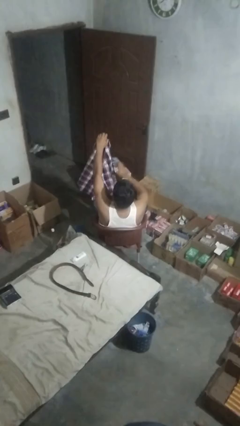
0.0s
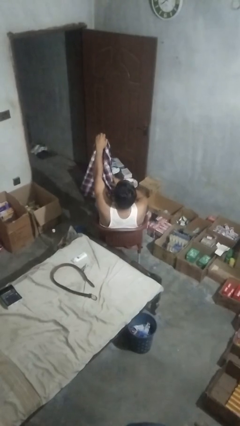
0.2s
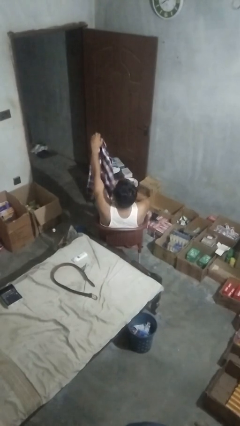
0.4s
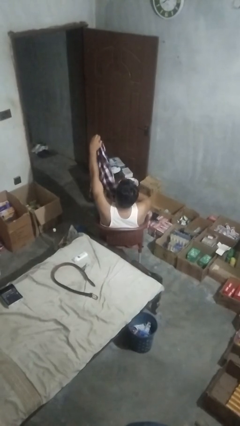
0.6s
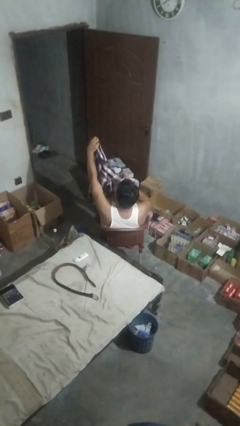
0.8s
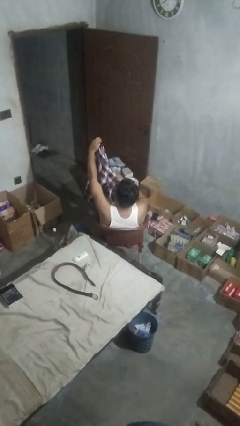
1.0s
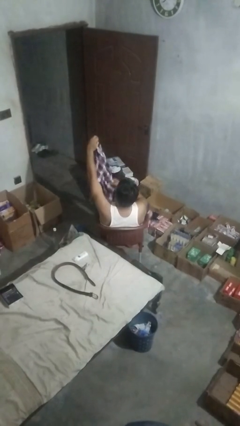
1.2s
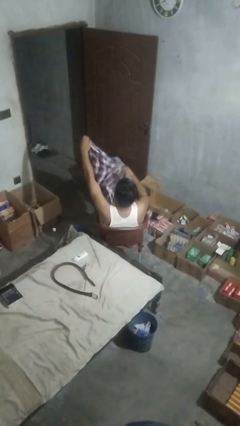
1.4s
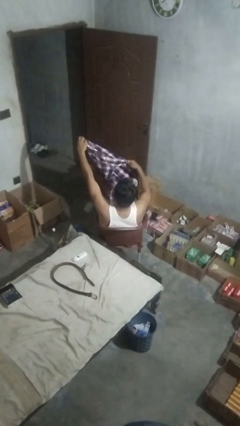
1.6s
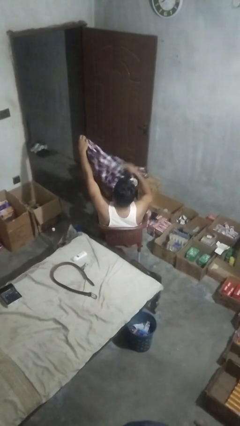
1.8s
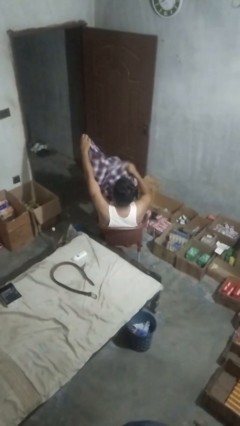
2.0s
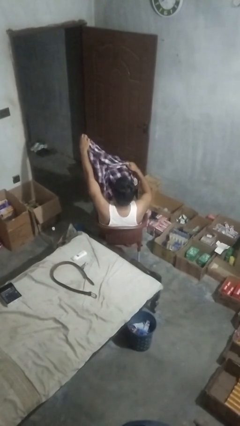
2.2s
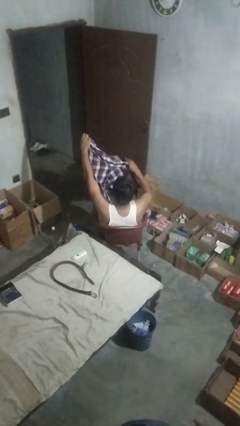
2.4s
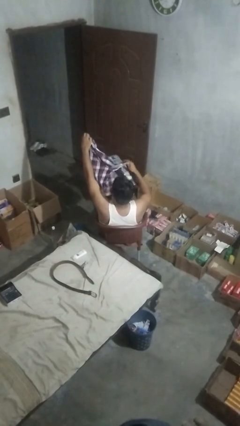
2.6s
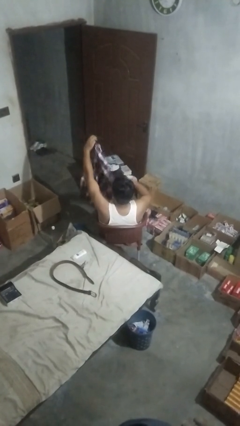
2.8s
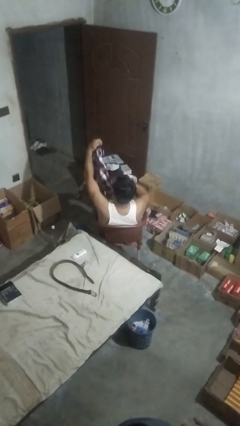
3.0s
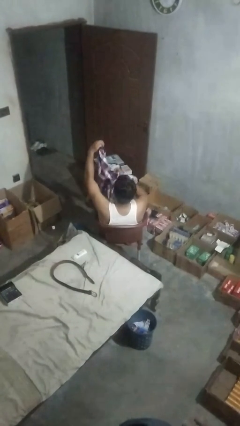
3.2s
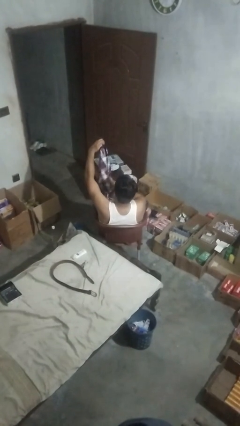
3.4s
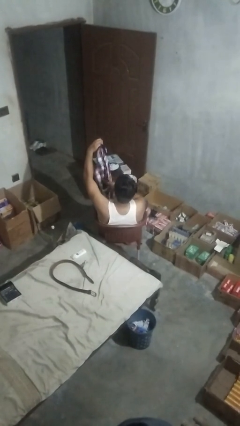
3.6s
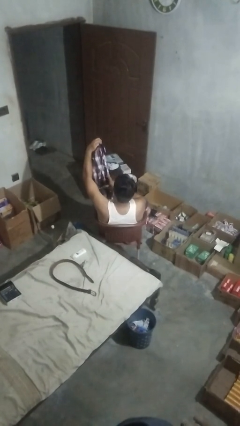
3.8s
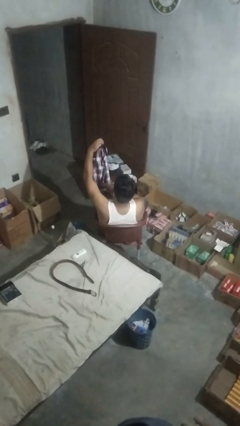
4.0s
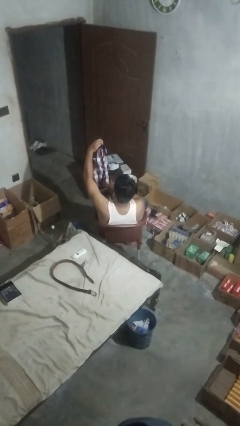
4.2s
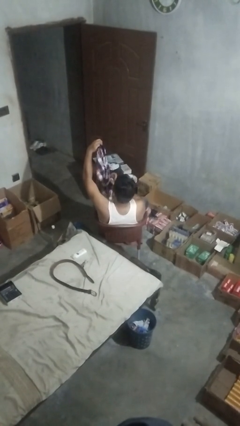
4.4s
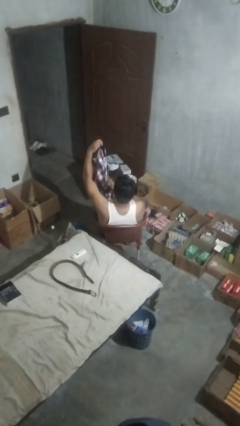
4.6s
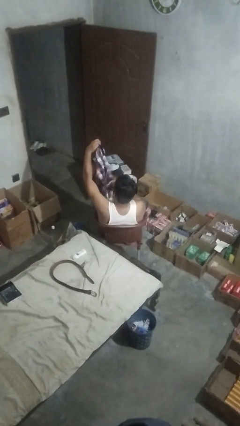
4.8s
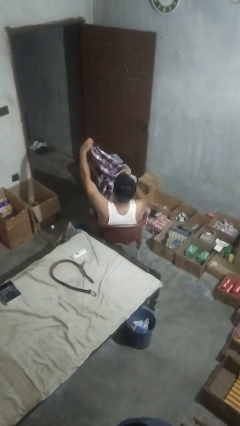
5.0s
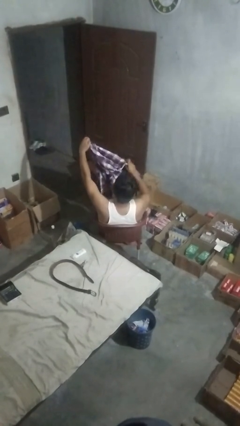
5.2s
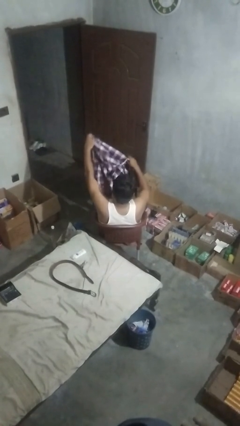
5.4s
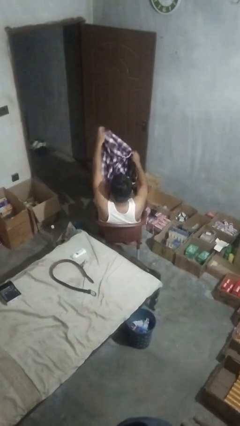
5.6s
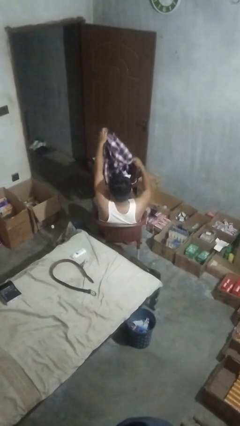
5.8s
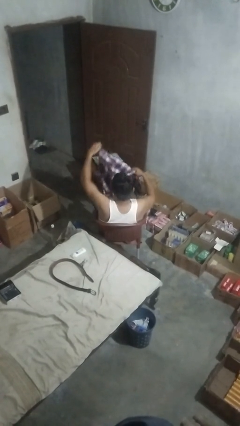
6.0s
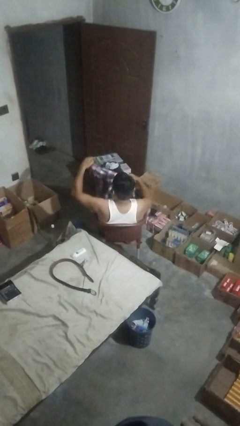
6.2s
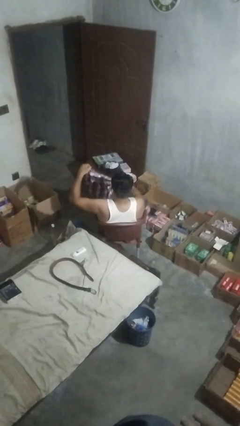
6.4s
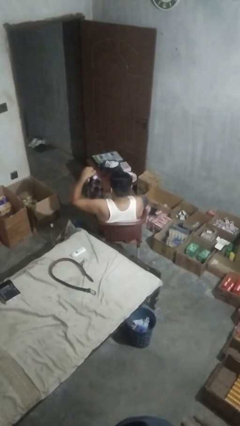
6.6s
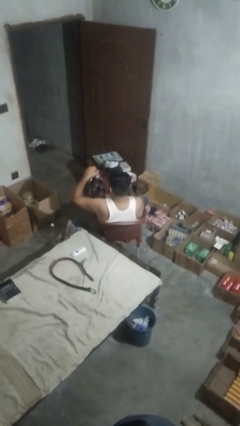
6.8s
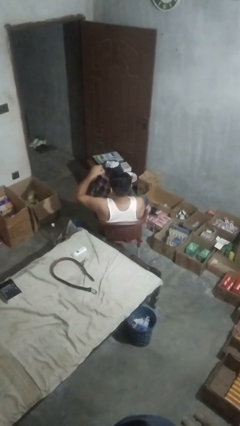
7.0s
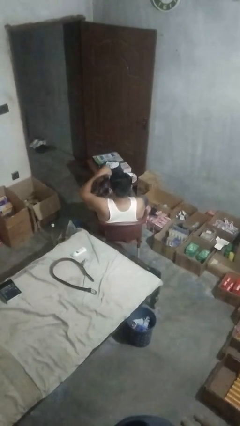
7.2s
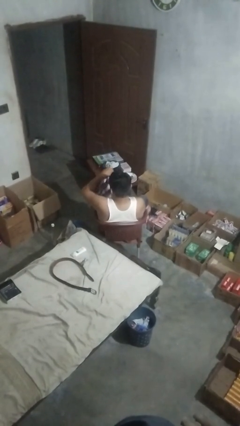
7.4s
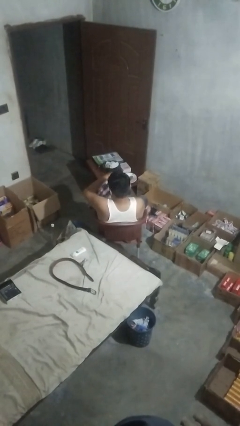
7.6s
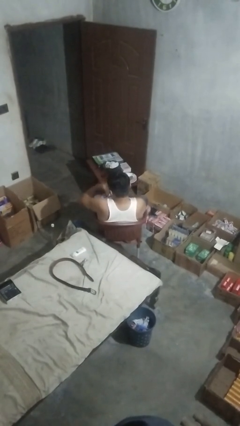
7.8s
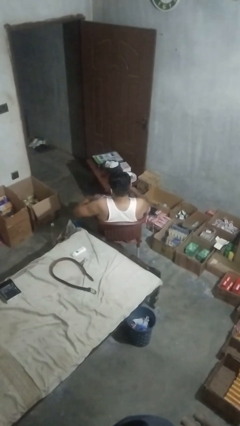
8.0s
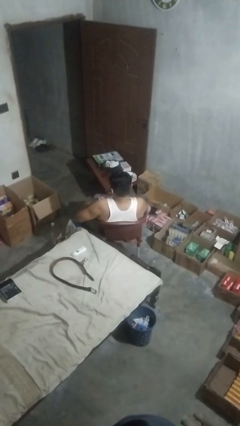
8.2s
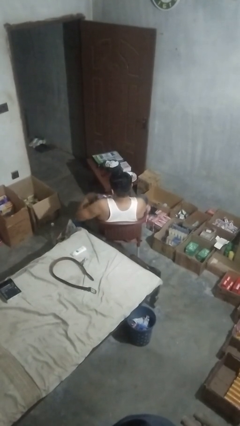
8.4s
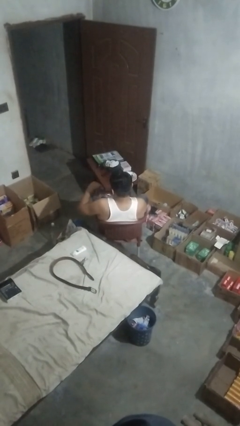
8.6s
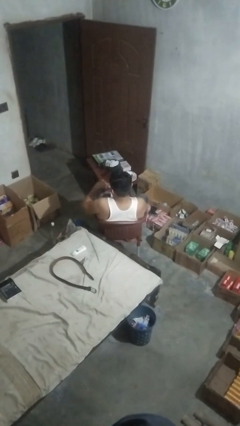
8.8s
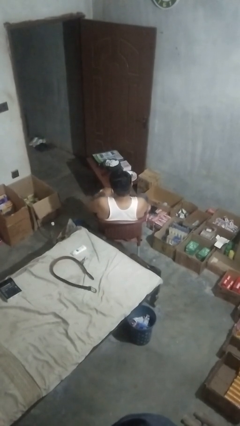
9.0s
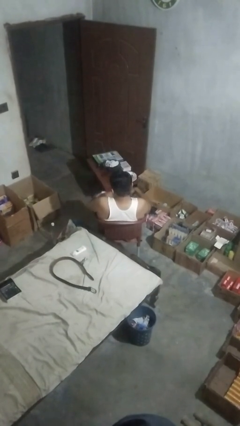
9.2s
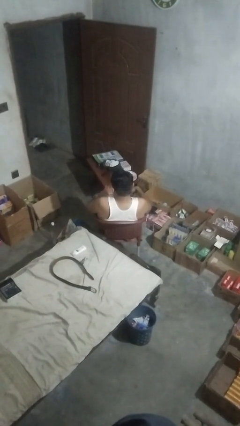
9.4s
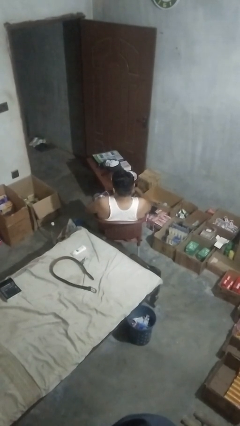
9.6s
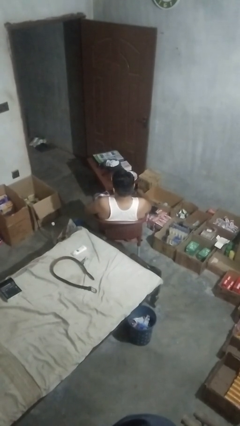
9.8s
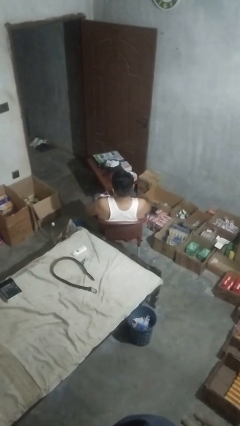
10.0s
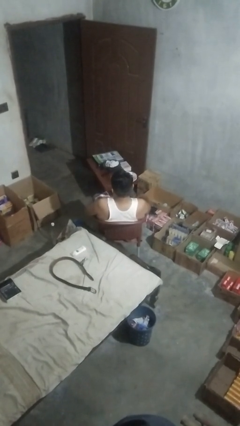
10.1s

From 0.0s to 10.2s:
person folds shirt

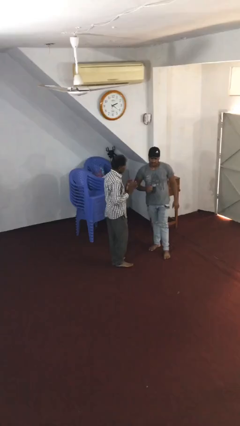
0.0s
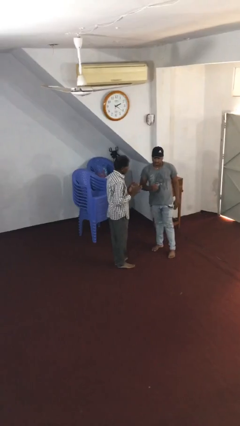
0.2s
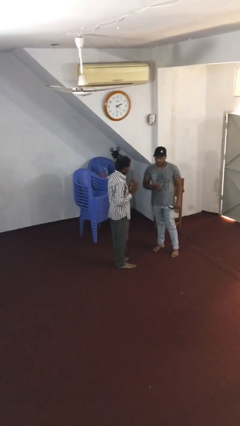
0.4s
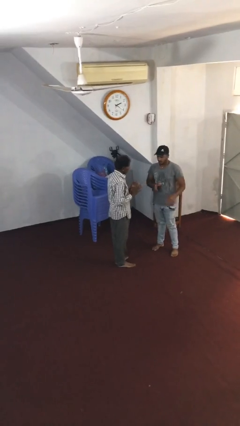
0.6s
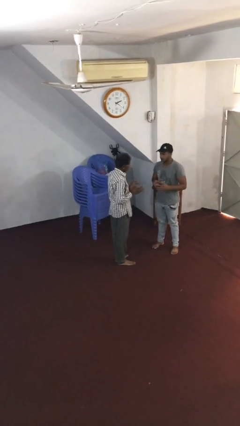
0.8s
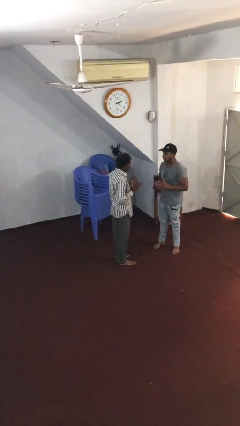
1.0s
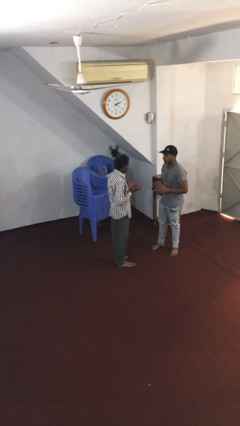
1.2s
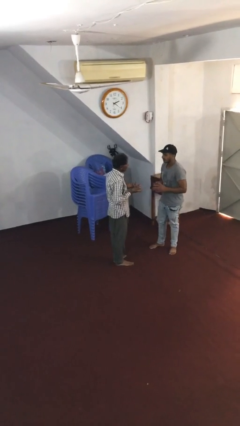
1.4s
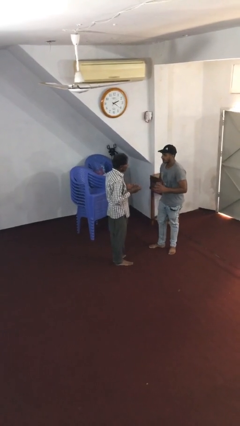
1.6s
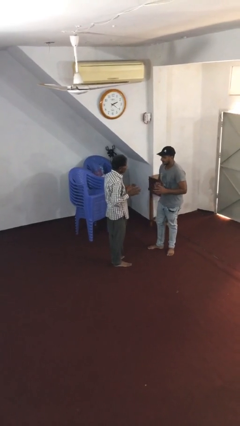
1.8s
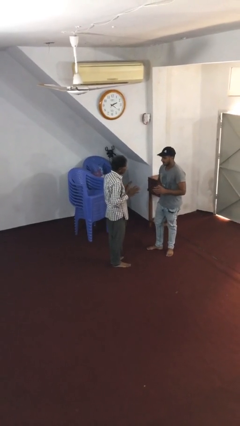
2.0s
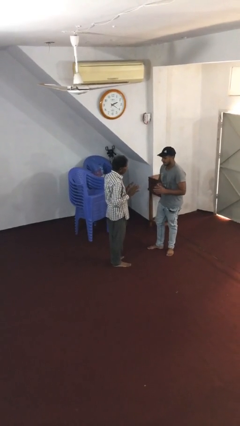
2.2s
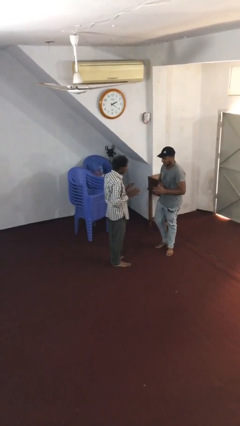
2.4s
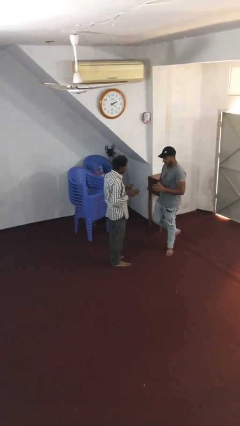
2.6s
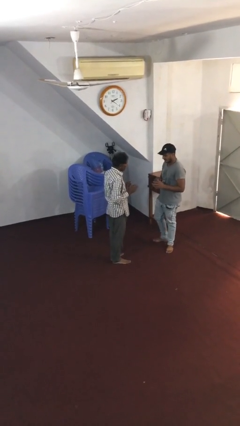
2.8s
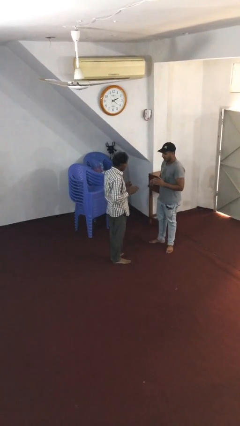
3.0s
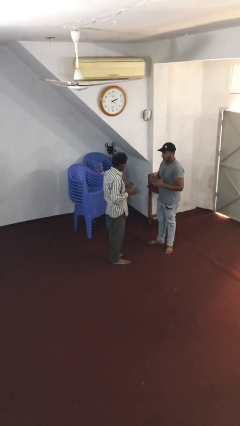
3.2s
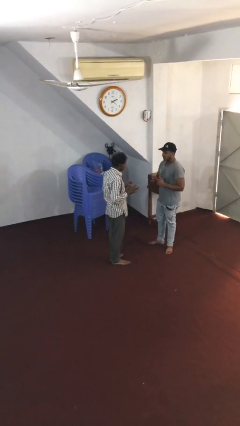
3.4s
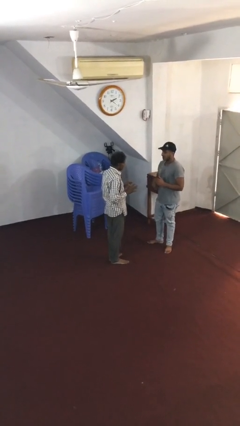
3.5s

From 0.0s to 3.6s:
person talks to person

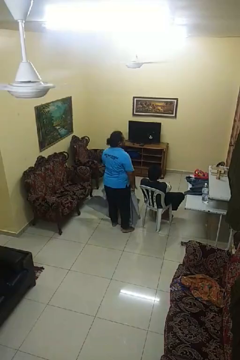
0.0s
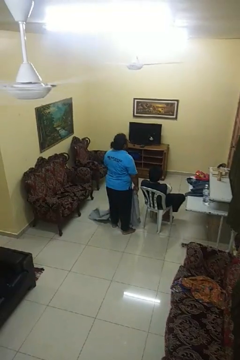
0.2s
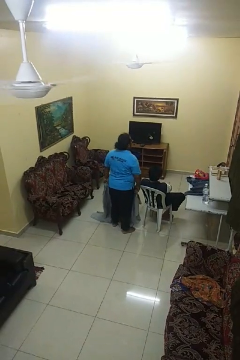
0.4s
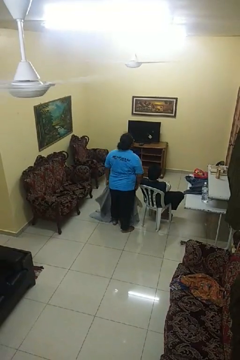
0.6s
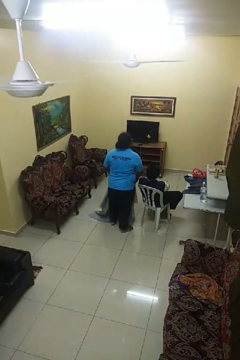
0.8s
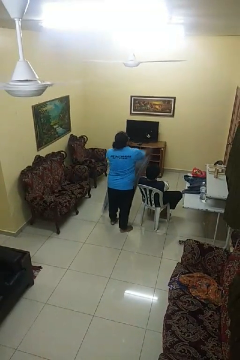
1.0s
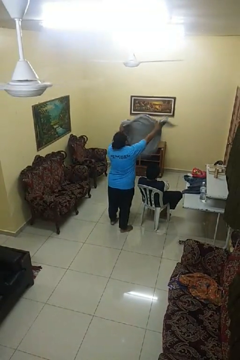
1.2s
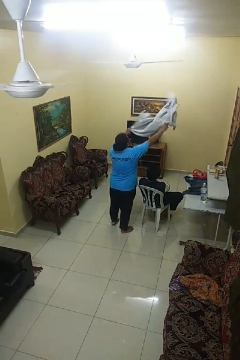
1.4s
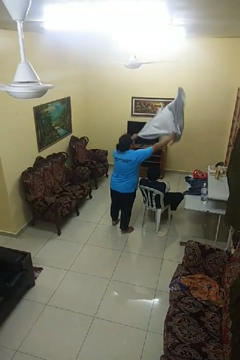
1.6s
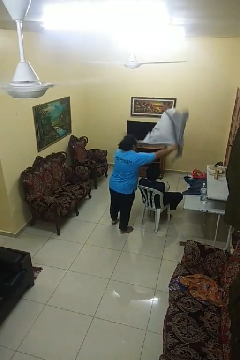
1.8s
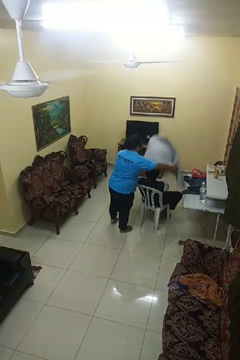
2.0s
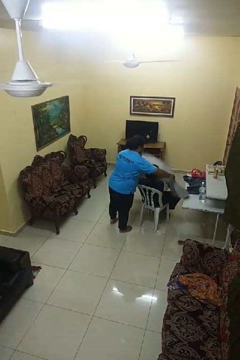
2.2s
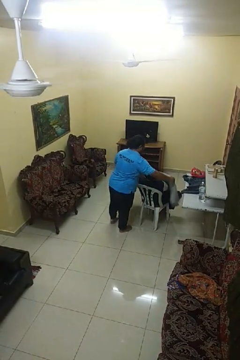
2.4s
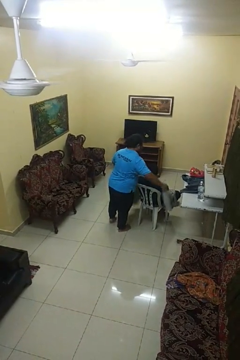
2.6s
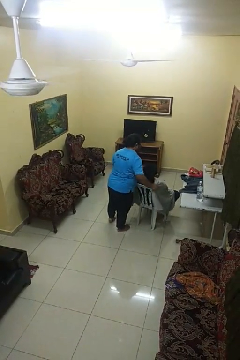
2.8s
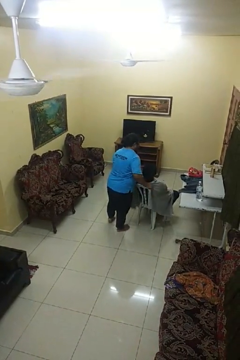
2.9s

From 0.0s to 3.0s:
person covers friend with blanket

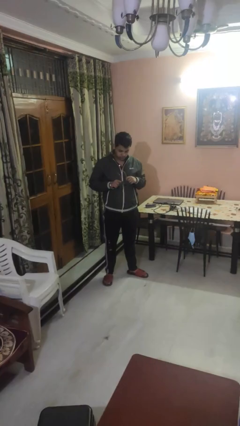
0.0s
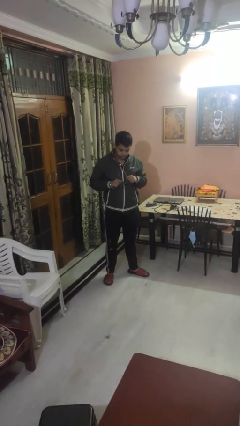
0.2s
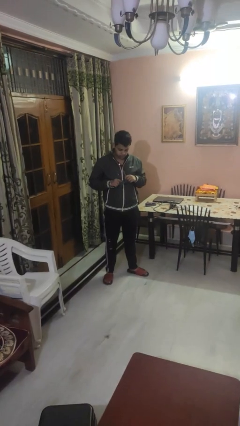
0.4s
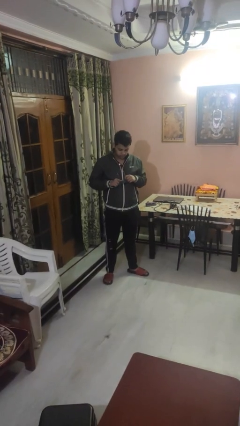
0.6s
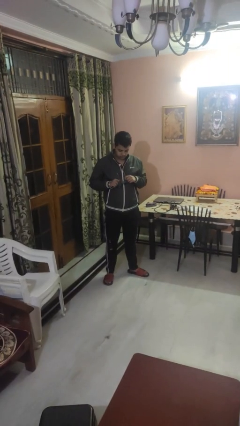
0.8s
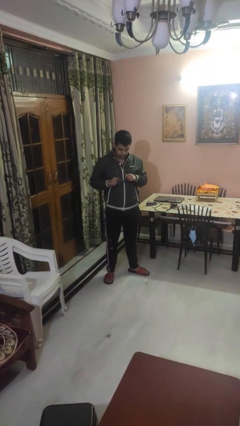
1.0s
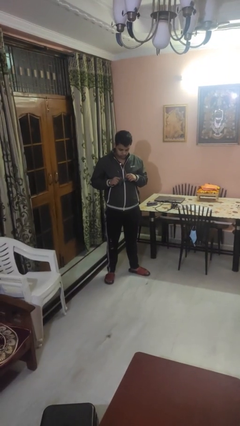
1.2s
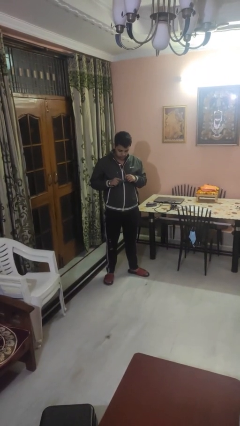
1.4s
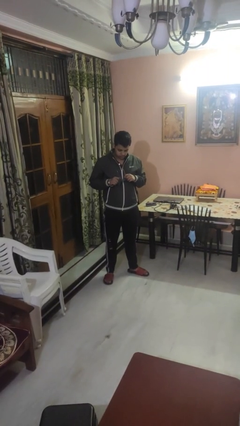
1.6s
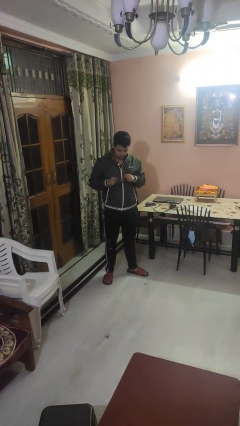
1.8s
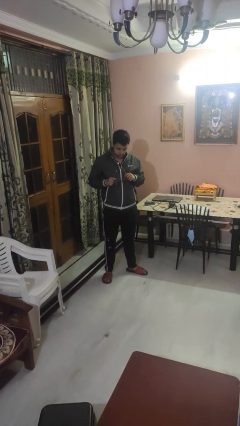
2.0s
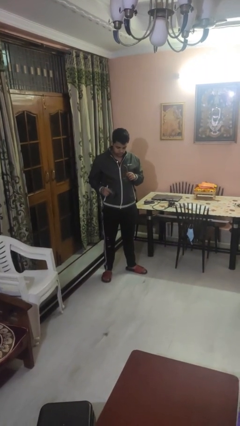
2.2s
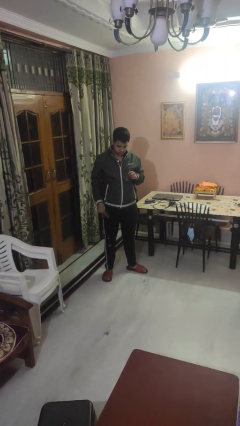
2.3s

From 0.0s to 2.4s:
person cleans eyeglasses
